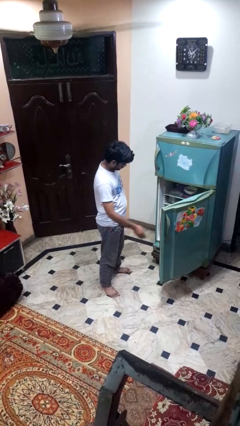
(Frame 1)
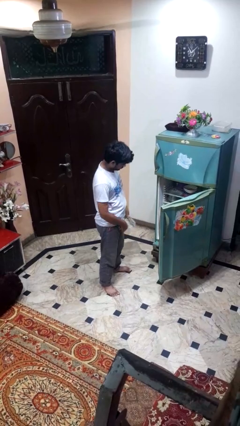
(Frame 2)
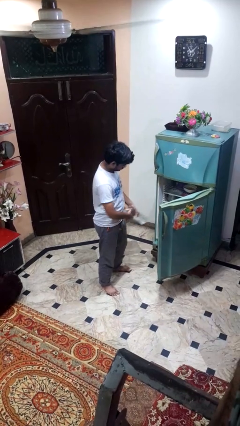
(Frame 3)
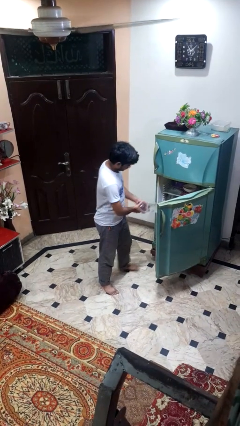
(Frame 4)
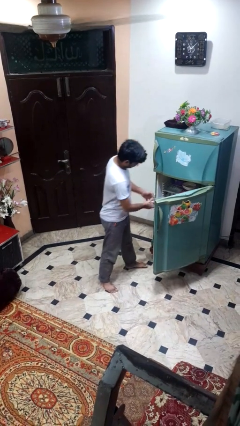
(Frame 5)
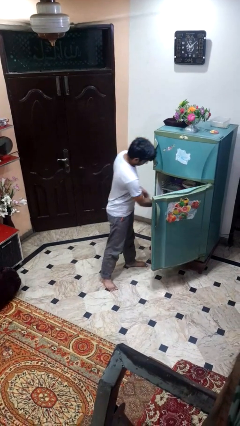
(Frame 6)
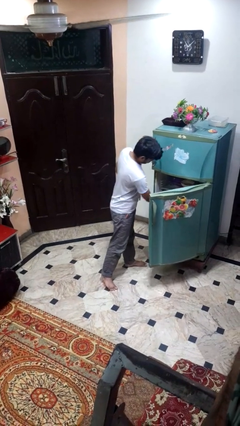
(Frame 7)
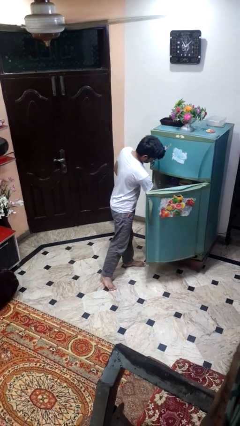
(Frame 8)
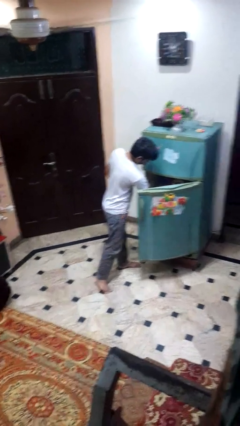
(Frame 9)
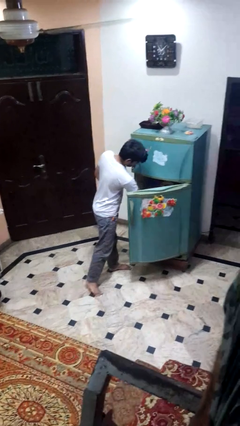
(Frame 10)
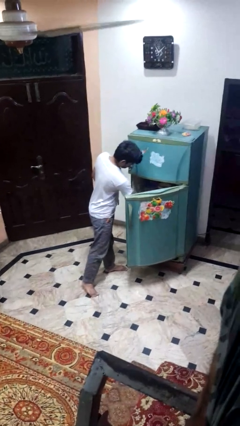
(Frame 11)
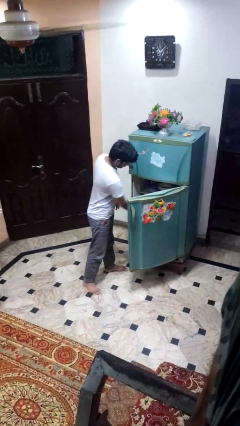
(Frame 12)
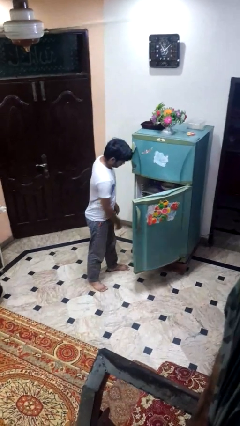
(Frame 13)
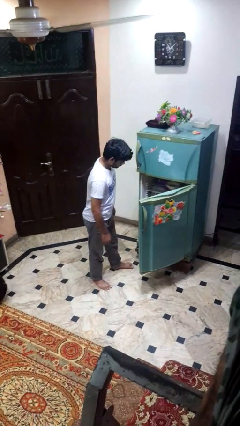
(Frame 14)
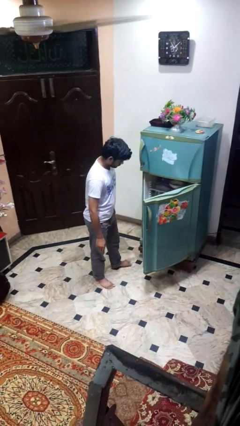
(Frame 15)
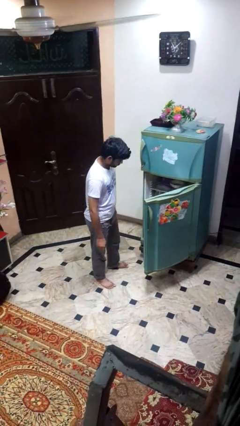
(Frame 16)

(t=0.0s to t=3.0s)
person puts object into refrigerator

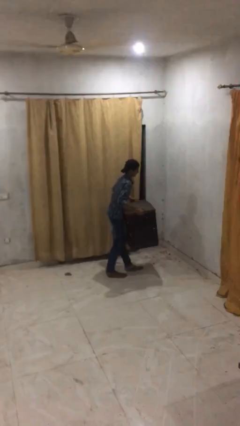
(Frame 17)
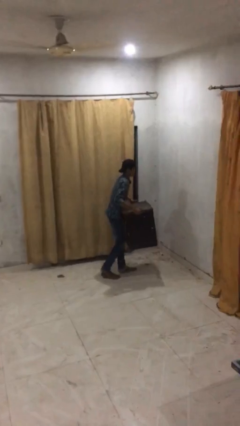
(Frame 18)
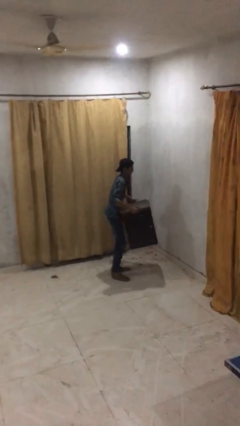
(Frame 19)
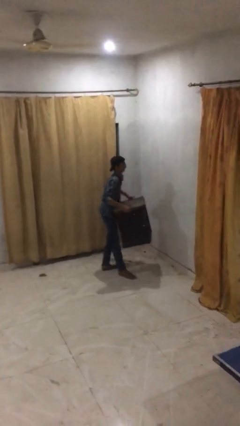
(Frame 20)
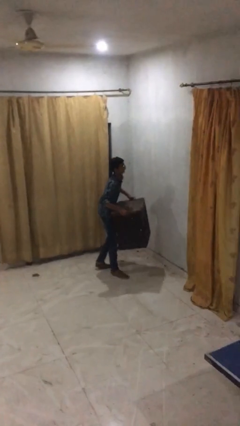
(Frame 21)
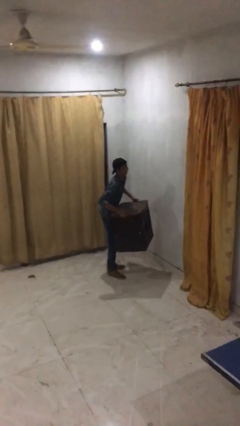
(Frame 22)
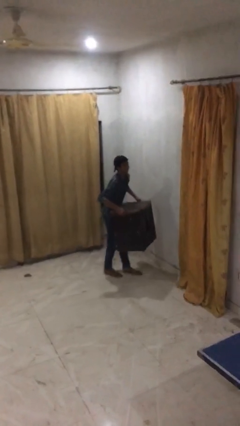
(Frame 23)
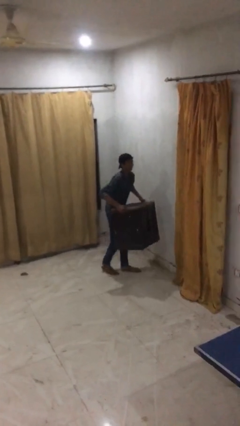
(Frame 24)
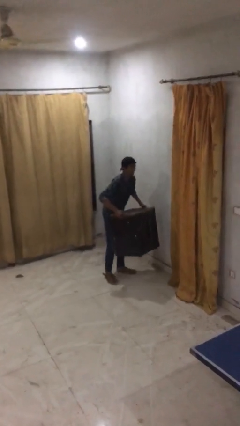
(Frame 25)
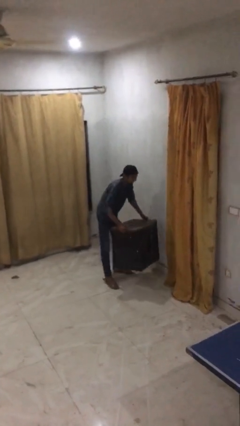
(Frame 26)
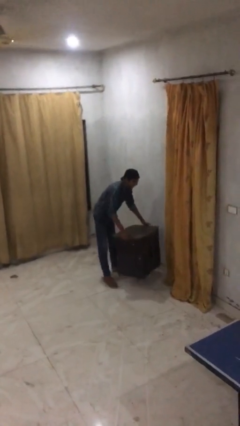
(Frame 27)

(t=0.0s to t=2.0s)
person carries heavy object

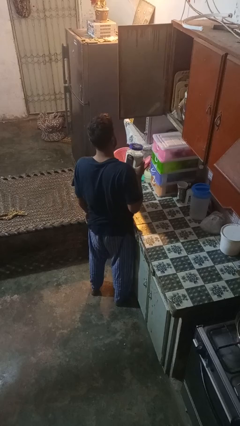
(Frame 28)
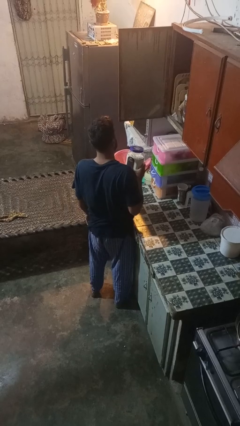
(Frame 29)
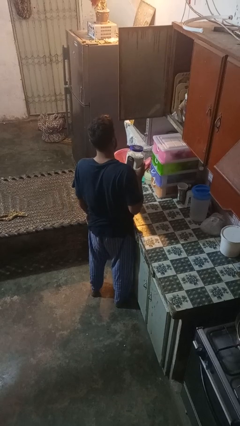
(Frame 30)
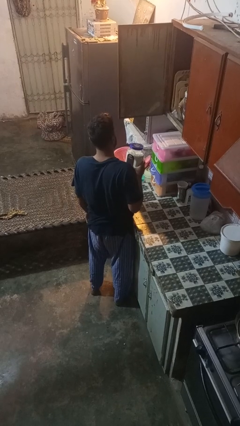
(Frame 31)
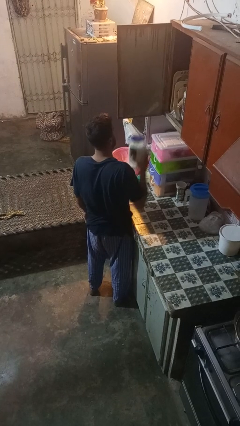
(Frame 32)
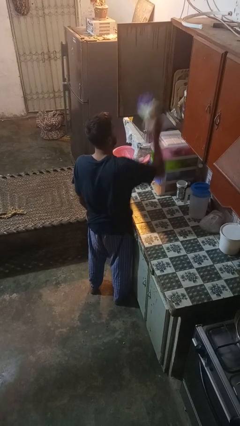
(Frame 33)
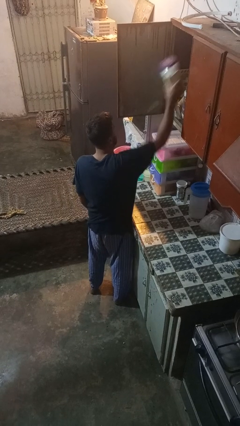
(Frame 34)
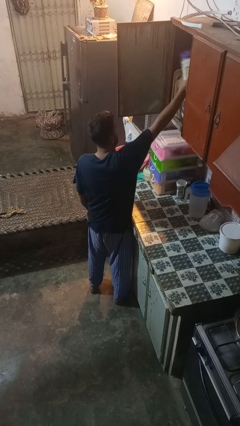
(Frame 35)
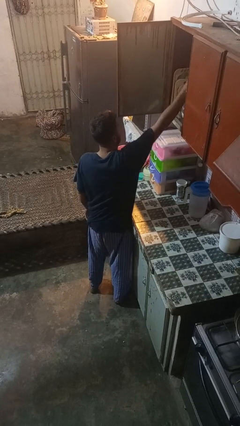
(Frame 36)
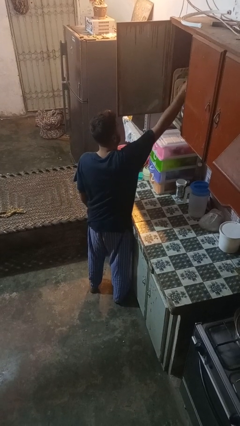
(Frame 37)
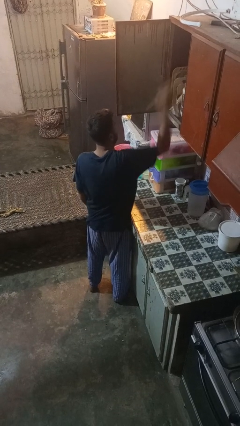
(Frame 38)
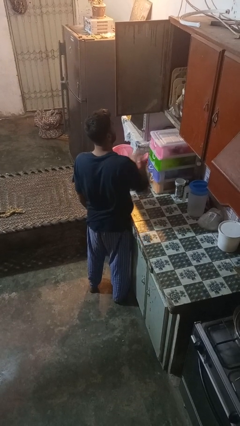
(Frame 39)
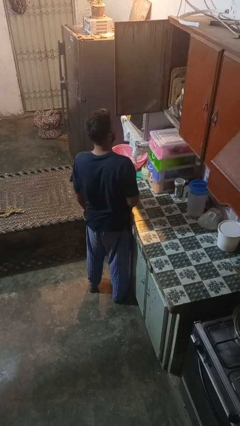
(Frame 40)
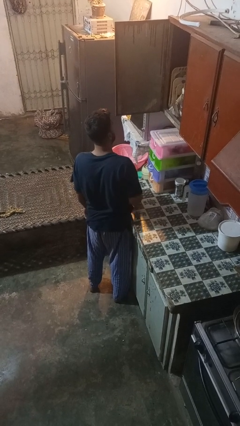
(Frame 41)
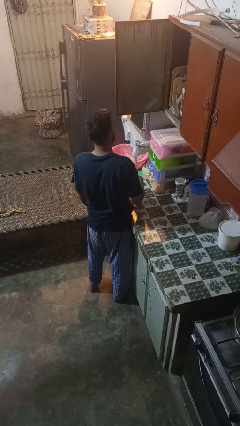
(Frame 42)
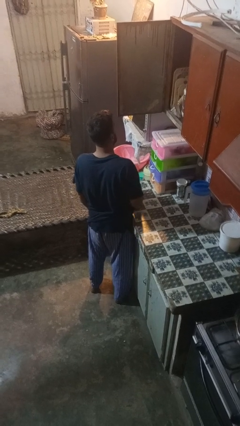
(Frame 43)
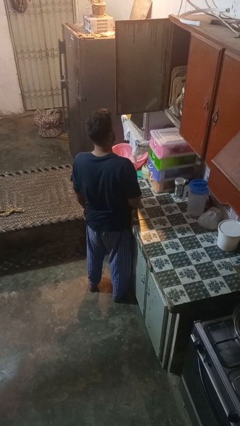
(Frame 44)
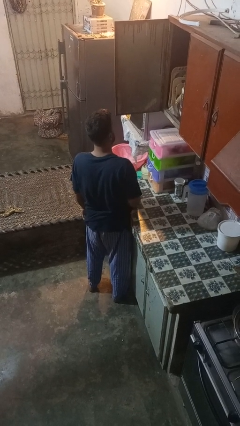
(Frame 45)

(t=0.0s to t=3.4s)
person takes object from cabinet

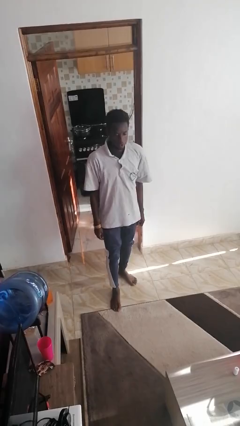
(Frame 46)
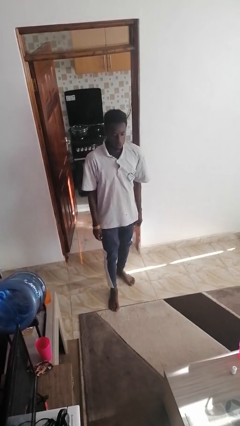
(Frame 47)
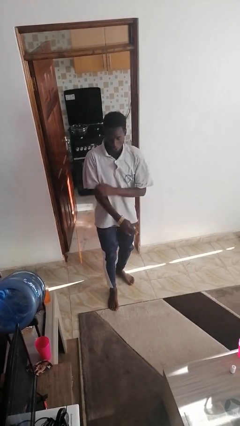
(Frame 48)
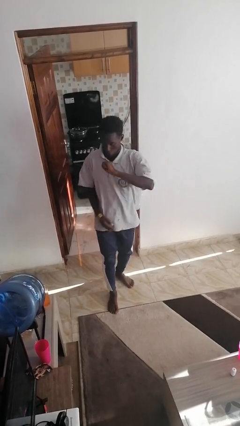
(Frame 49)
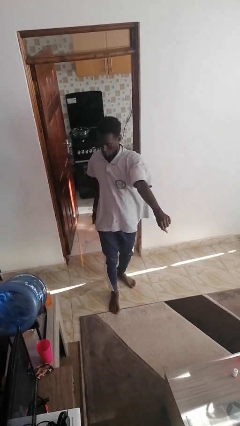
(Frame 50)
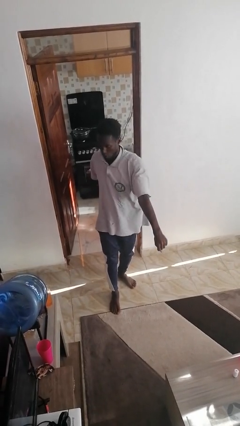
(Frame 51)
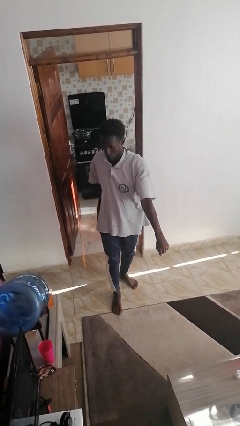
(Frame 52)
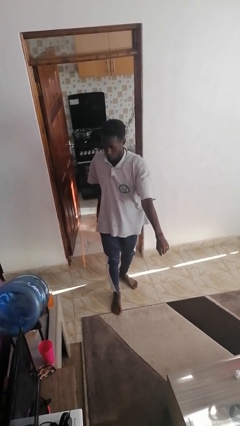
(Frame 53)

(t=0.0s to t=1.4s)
person karate chop

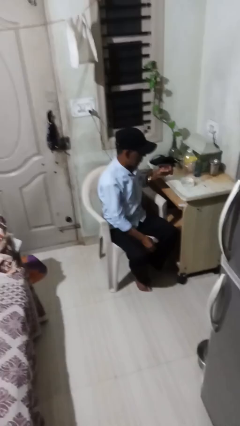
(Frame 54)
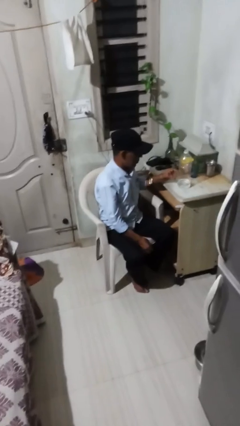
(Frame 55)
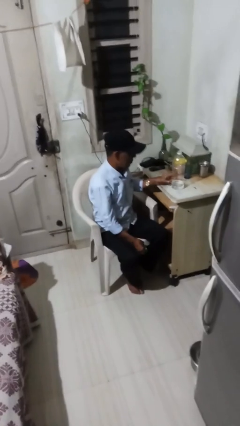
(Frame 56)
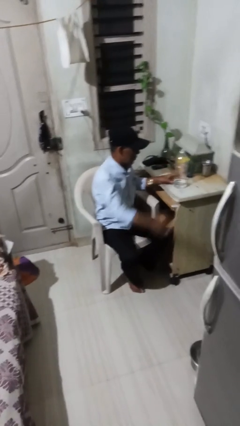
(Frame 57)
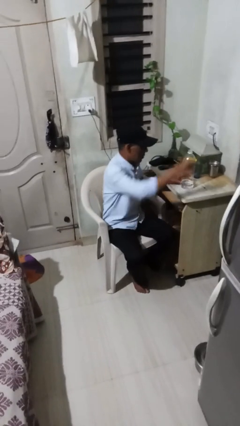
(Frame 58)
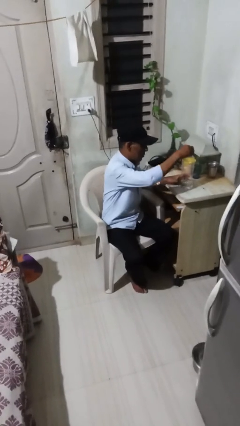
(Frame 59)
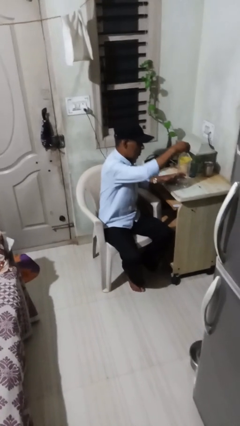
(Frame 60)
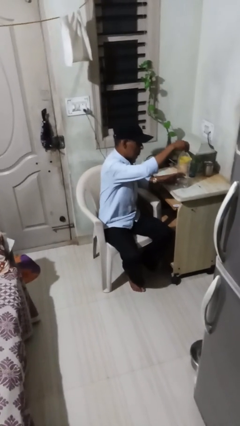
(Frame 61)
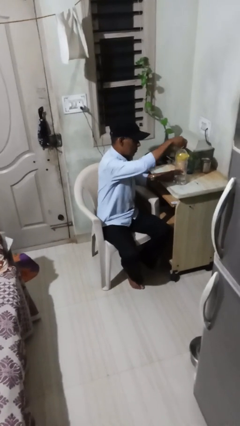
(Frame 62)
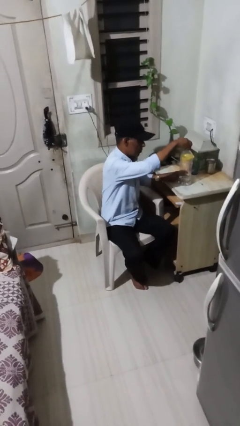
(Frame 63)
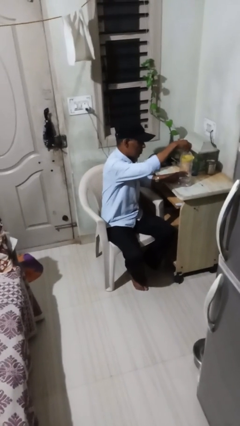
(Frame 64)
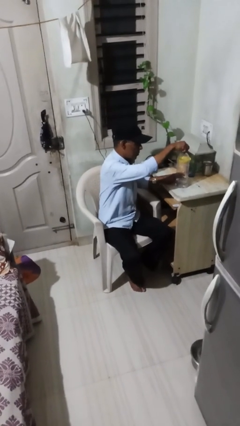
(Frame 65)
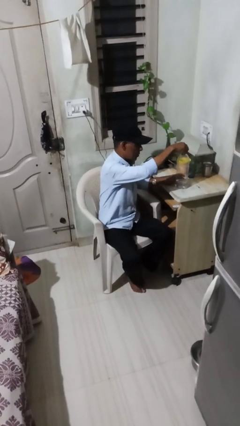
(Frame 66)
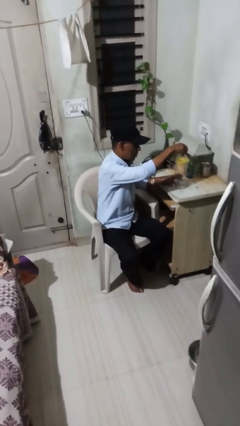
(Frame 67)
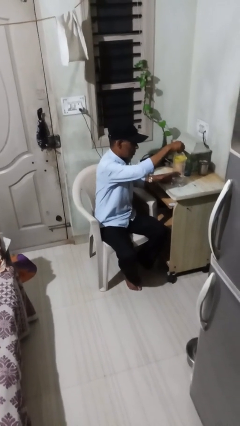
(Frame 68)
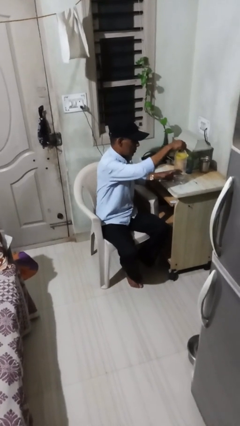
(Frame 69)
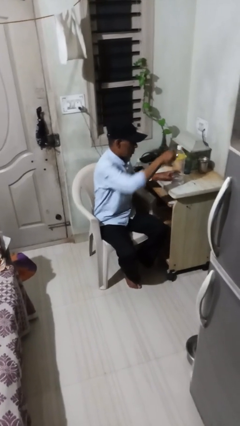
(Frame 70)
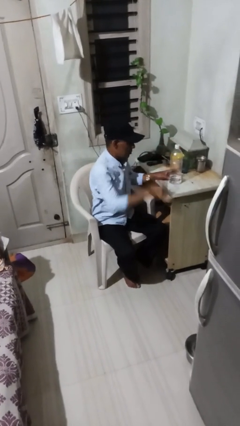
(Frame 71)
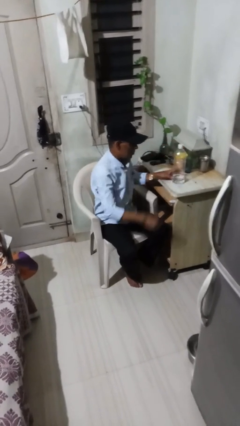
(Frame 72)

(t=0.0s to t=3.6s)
person screws lid to bottle

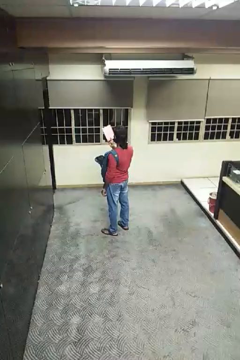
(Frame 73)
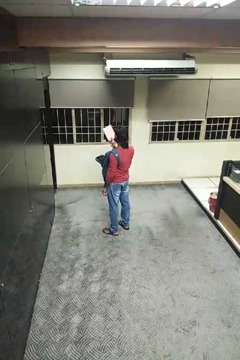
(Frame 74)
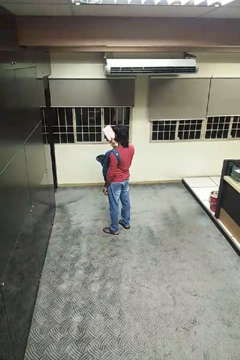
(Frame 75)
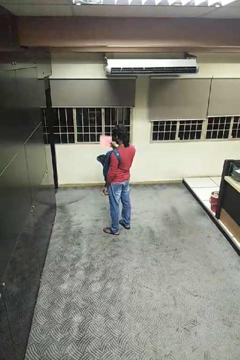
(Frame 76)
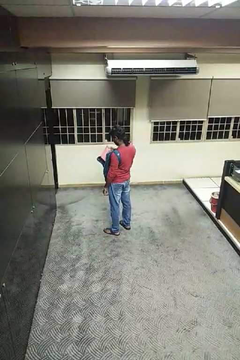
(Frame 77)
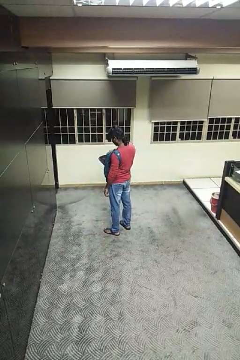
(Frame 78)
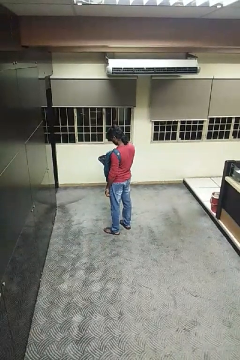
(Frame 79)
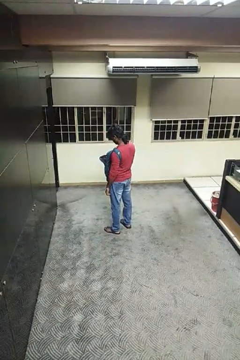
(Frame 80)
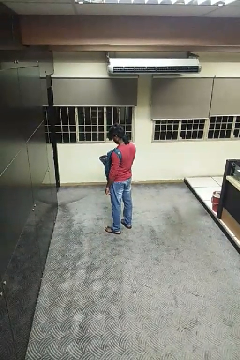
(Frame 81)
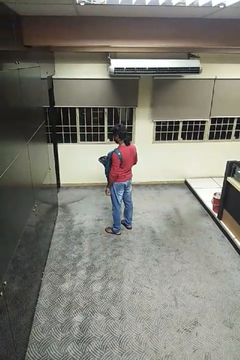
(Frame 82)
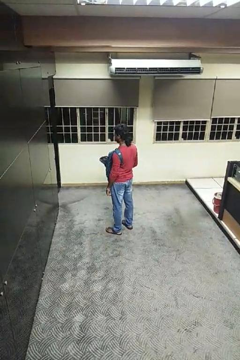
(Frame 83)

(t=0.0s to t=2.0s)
person puts object into backpack

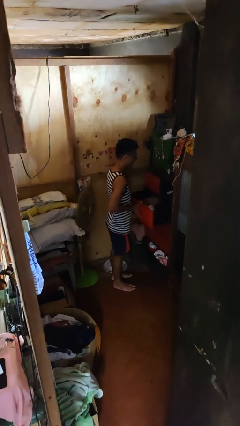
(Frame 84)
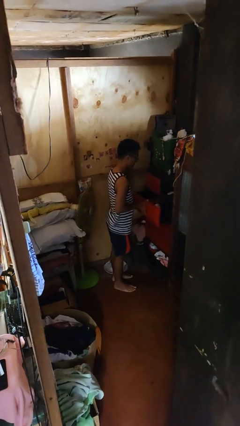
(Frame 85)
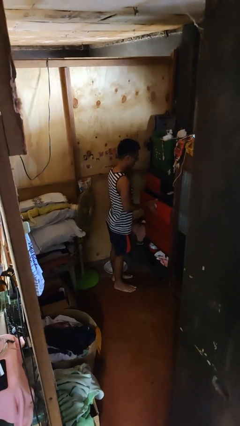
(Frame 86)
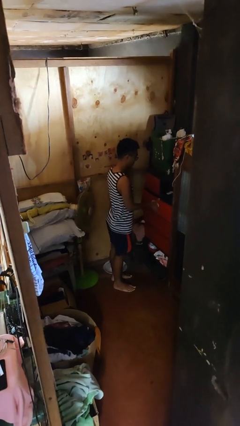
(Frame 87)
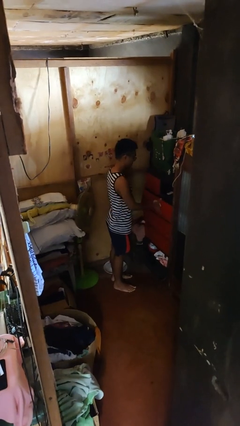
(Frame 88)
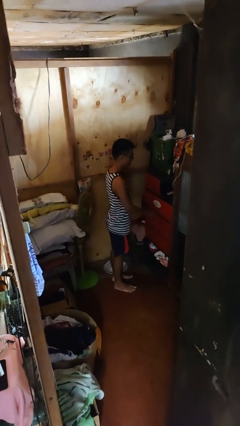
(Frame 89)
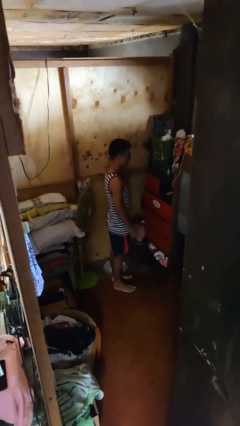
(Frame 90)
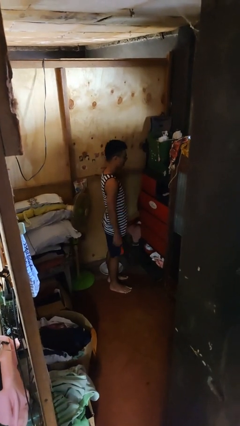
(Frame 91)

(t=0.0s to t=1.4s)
person closes dresser drawer

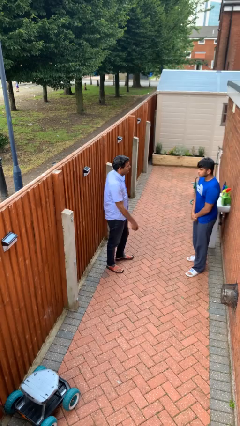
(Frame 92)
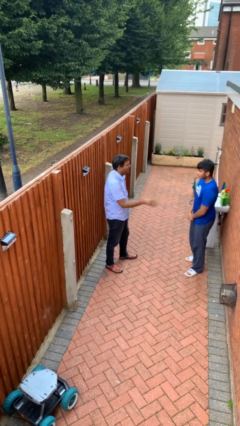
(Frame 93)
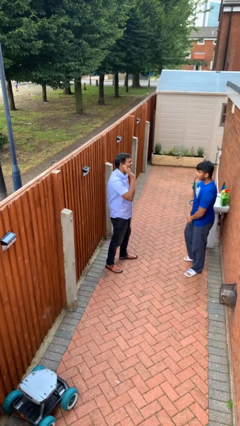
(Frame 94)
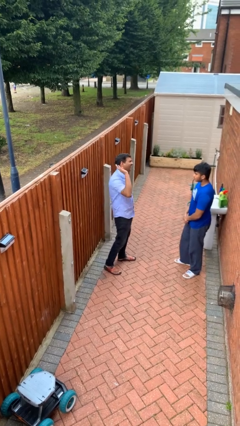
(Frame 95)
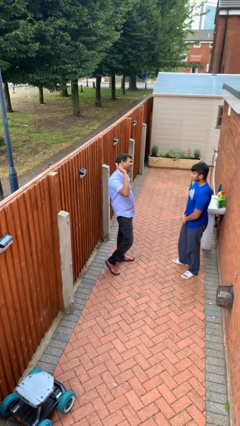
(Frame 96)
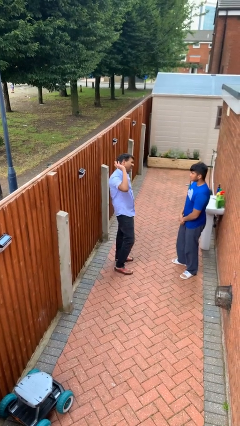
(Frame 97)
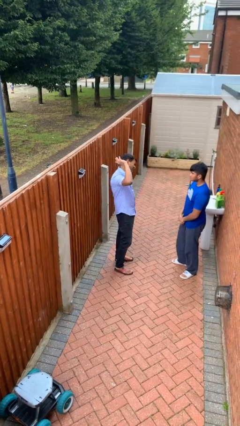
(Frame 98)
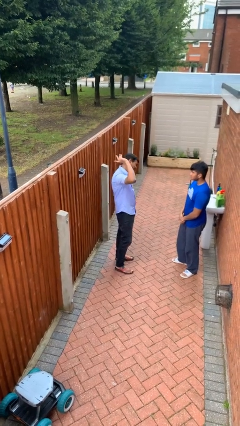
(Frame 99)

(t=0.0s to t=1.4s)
person laughs with person
